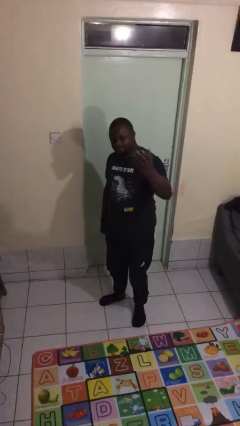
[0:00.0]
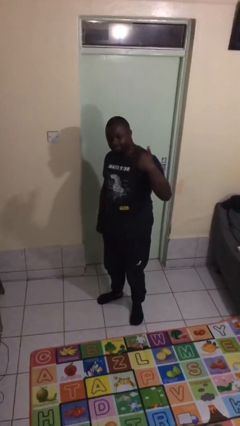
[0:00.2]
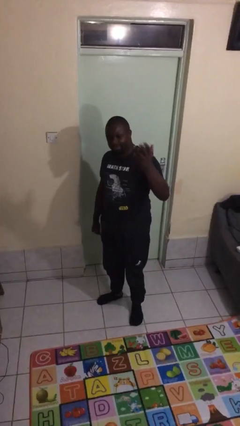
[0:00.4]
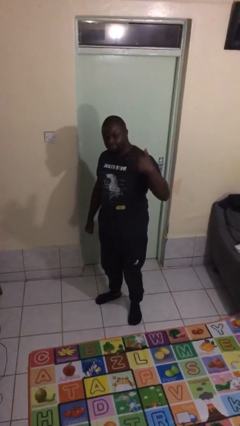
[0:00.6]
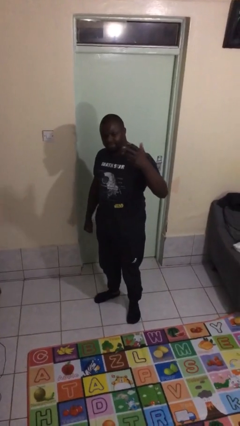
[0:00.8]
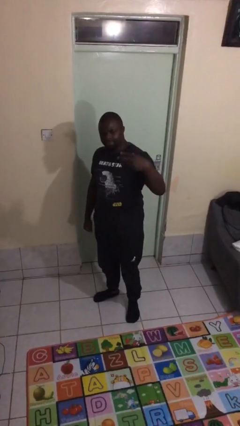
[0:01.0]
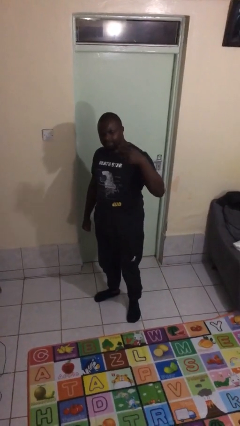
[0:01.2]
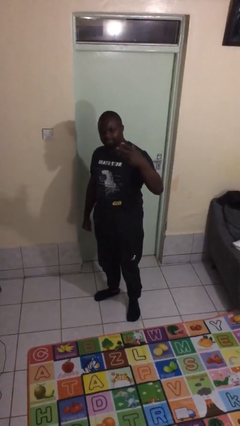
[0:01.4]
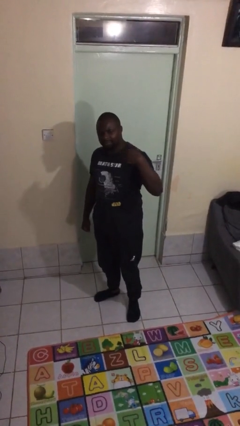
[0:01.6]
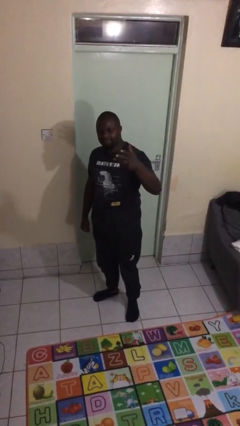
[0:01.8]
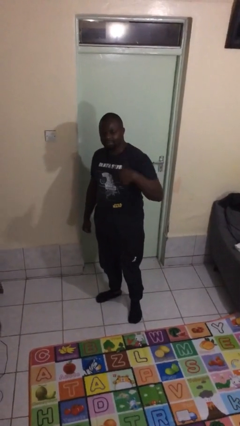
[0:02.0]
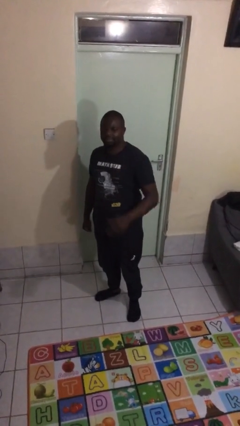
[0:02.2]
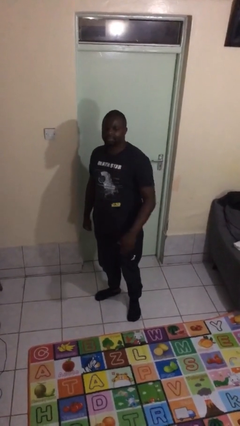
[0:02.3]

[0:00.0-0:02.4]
person gestures come here

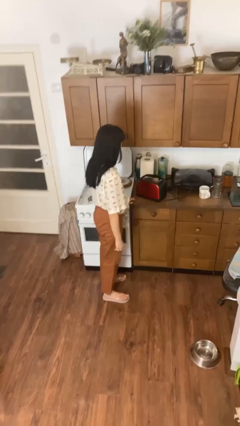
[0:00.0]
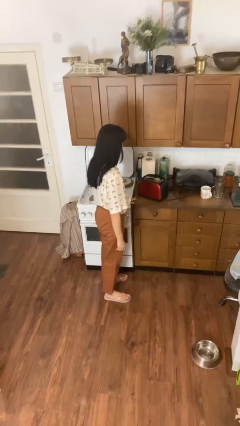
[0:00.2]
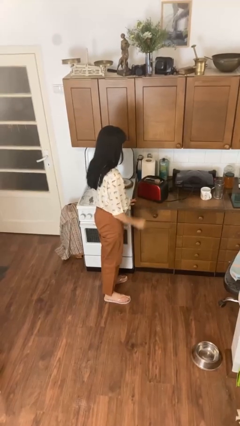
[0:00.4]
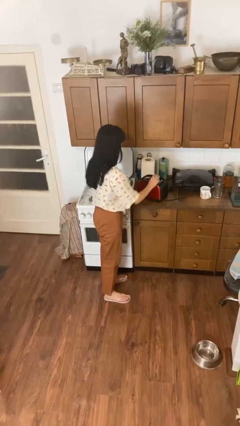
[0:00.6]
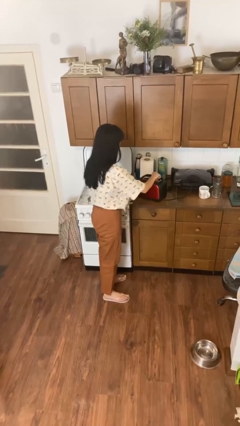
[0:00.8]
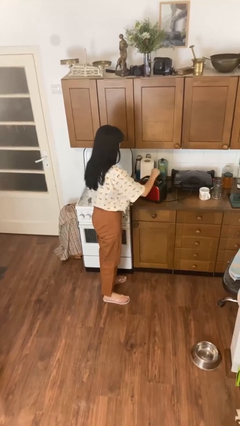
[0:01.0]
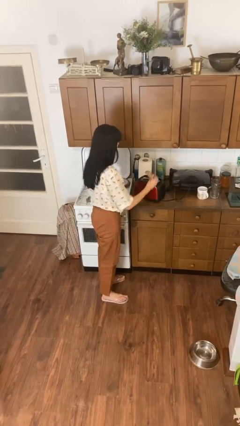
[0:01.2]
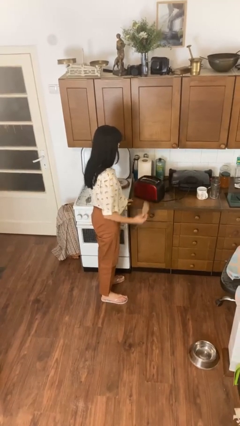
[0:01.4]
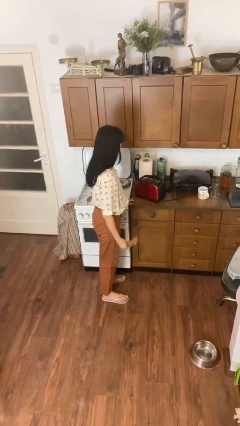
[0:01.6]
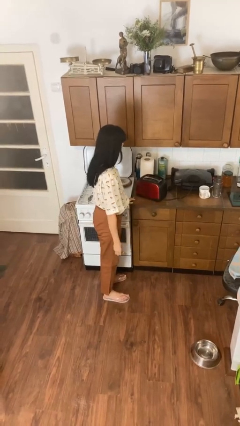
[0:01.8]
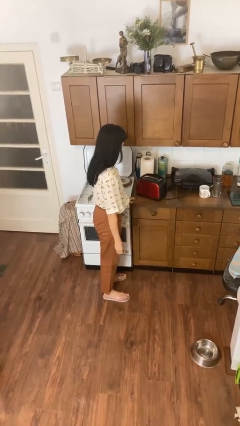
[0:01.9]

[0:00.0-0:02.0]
person takes object from toaster

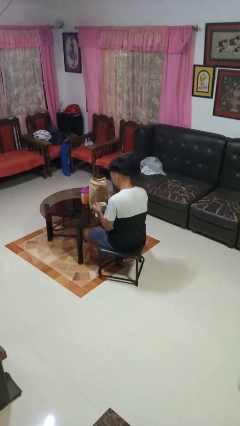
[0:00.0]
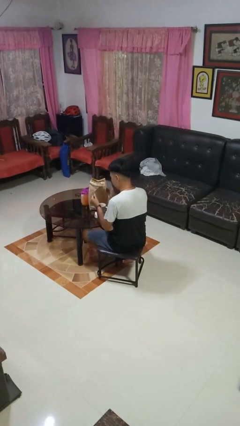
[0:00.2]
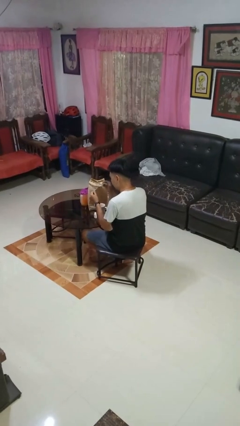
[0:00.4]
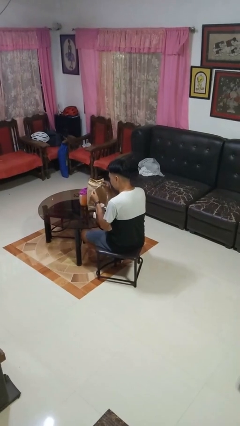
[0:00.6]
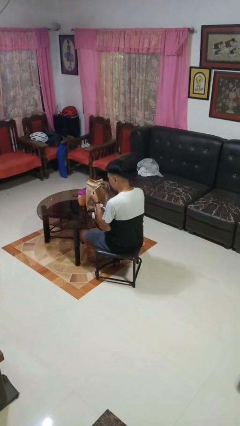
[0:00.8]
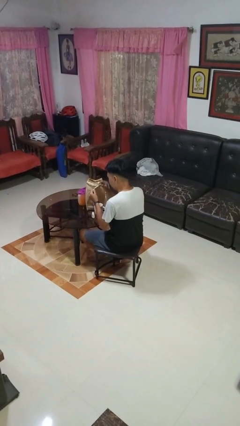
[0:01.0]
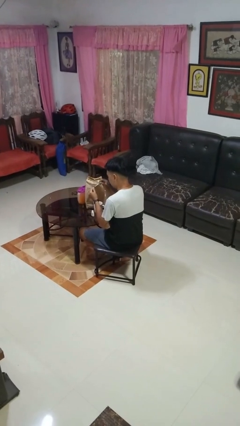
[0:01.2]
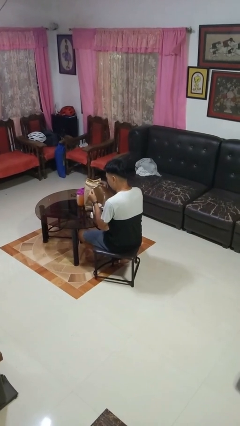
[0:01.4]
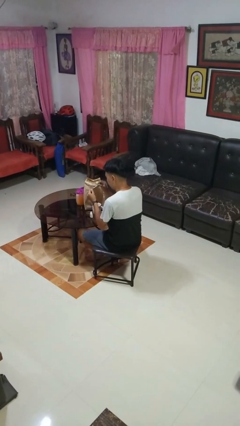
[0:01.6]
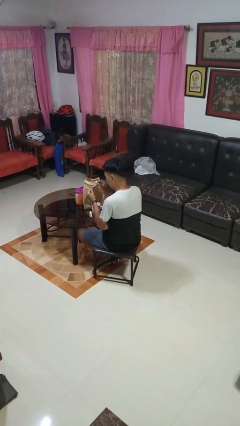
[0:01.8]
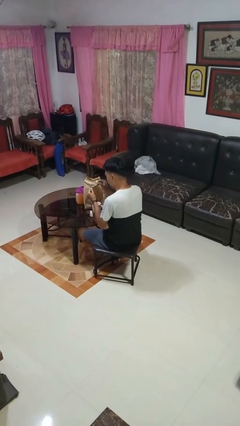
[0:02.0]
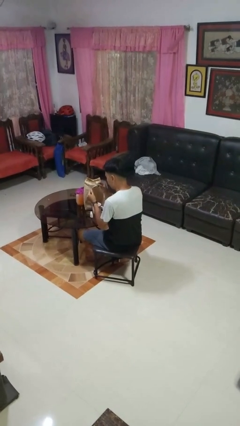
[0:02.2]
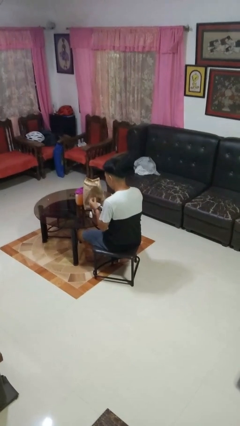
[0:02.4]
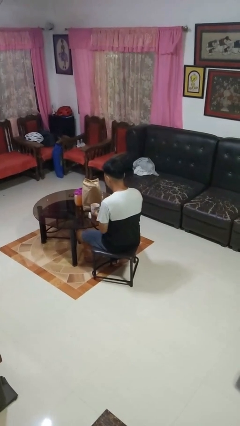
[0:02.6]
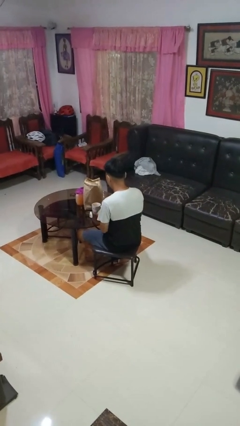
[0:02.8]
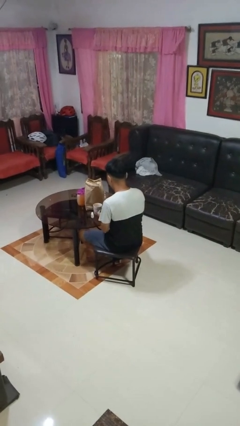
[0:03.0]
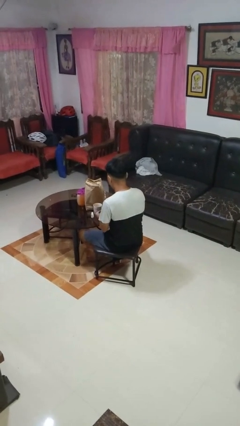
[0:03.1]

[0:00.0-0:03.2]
person paints fingernails

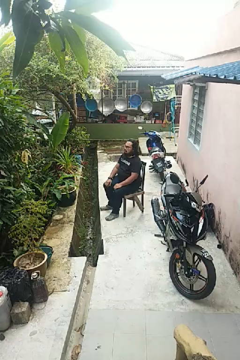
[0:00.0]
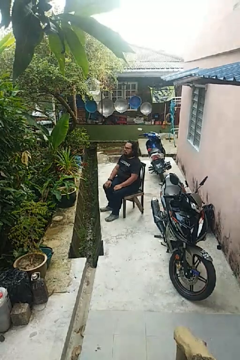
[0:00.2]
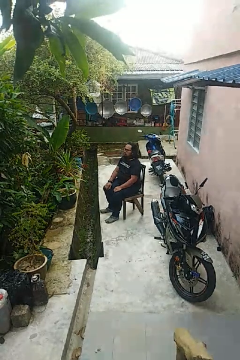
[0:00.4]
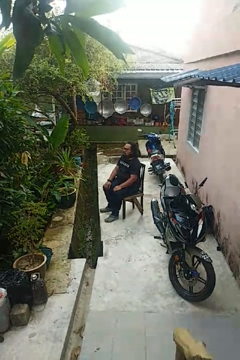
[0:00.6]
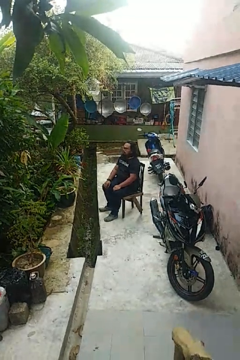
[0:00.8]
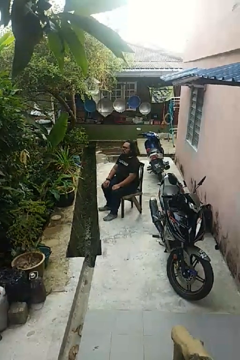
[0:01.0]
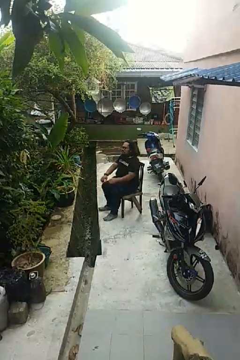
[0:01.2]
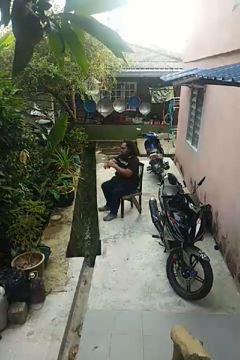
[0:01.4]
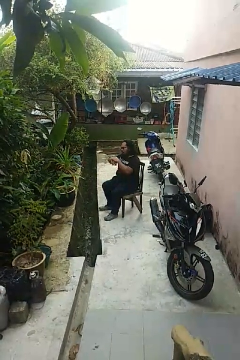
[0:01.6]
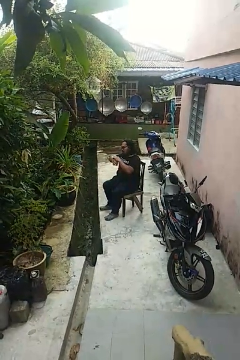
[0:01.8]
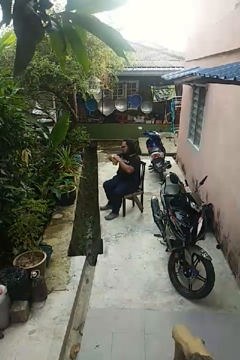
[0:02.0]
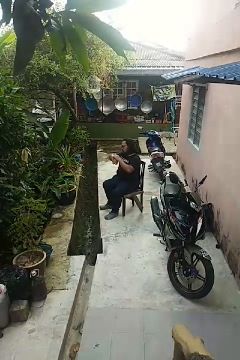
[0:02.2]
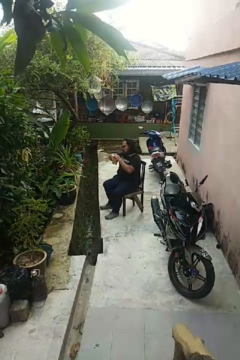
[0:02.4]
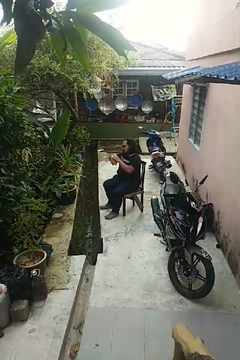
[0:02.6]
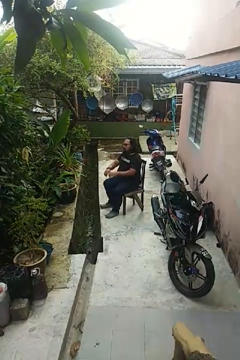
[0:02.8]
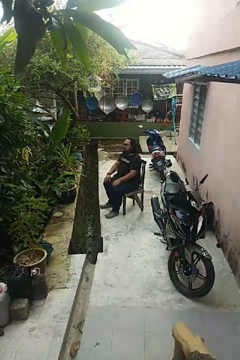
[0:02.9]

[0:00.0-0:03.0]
person looks at wristwatch

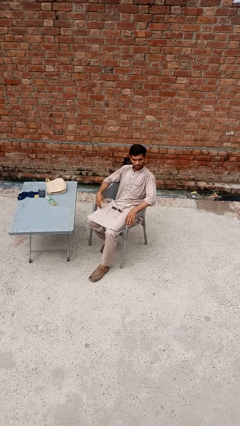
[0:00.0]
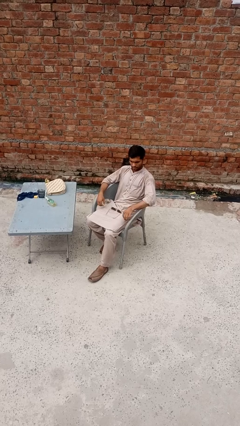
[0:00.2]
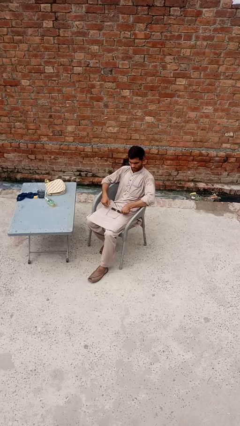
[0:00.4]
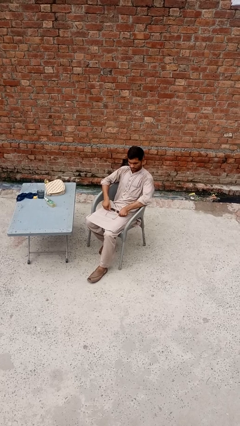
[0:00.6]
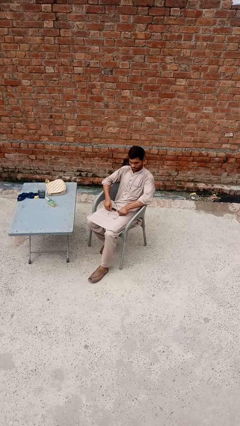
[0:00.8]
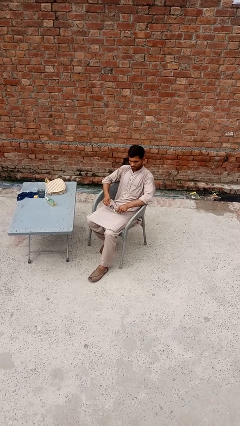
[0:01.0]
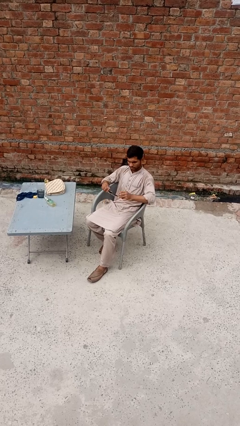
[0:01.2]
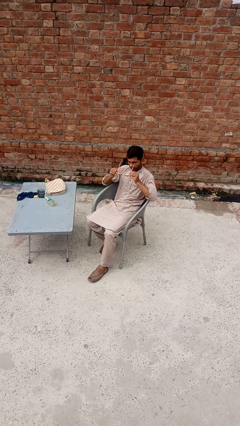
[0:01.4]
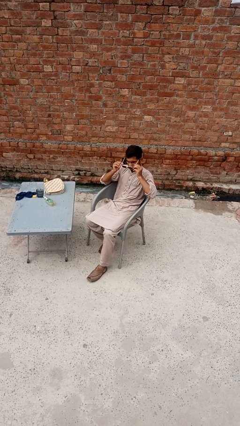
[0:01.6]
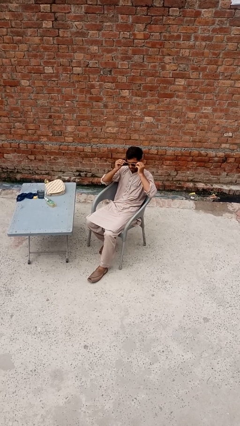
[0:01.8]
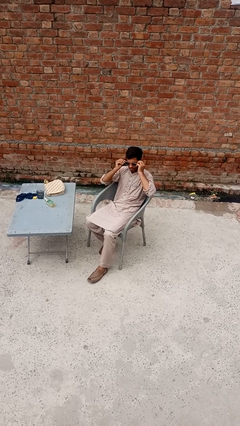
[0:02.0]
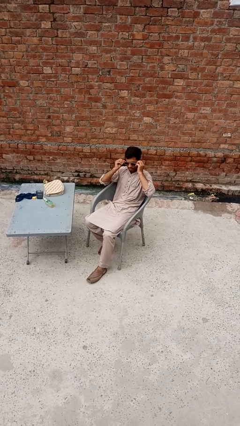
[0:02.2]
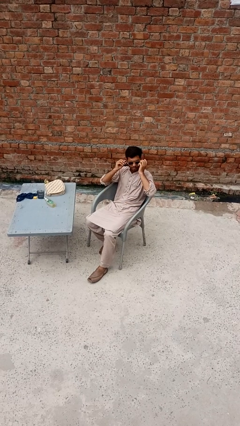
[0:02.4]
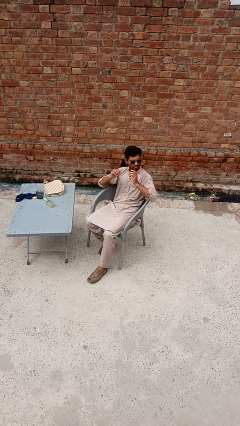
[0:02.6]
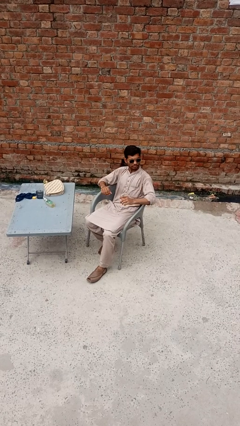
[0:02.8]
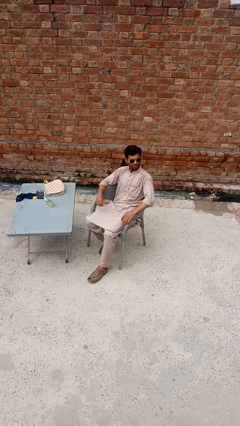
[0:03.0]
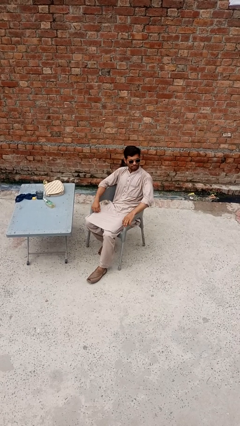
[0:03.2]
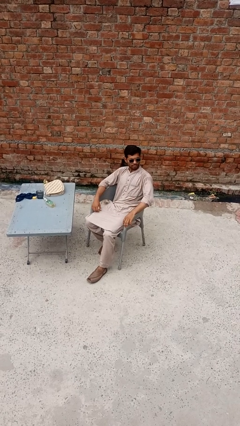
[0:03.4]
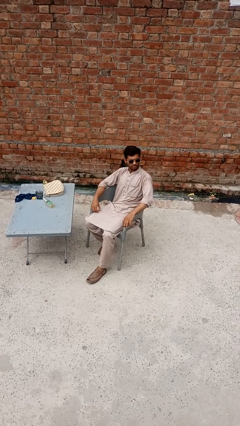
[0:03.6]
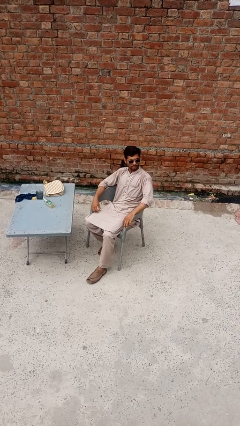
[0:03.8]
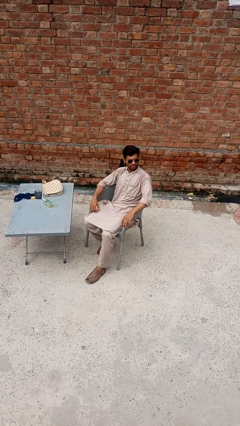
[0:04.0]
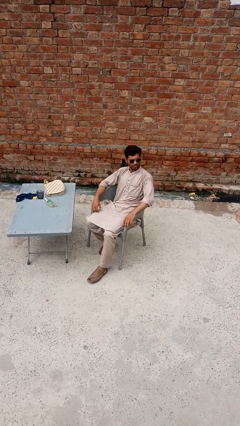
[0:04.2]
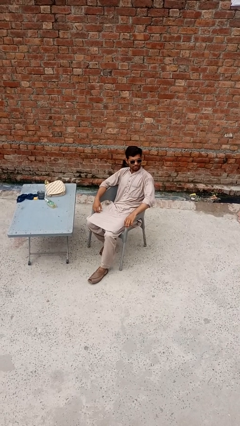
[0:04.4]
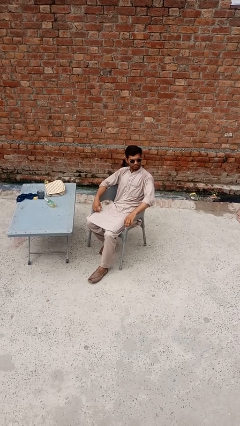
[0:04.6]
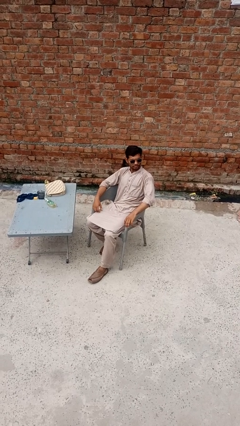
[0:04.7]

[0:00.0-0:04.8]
person puts on sunglasses

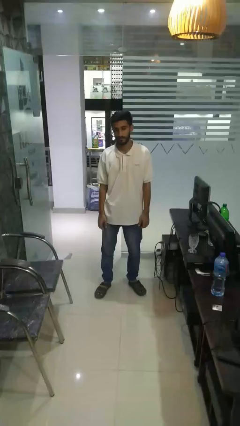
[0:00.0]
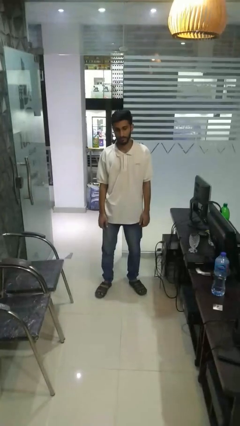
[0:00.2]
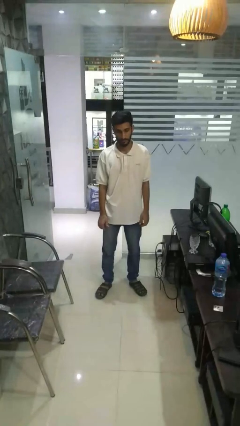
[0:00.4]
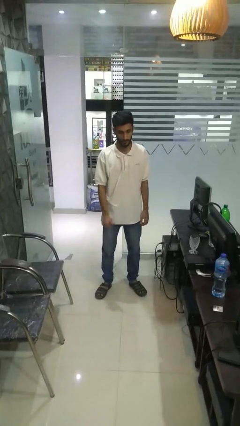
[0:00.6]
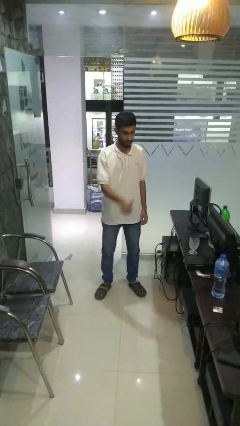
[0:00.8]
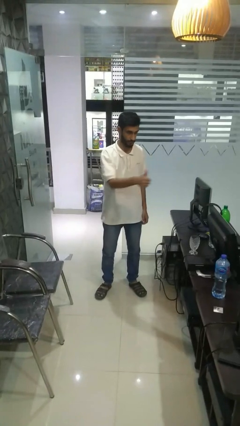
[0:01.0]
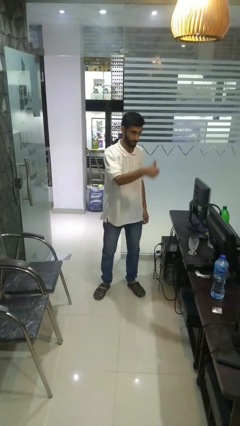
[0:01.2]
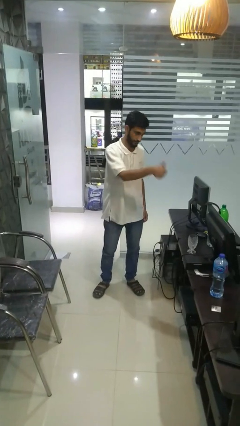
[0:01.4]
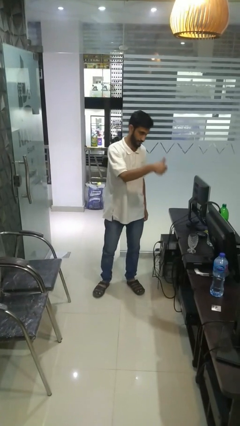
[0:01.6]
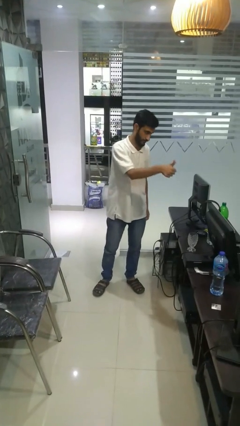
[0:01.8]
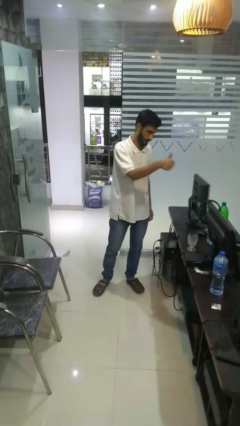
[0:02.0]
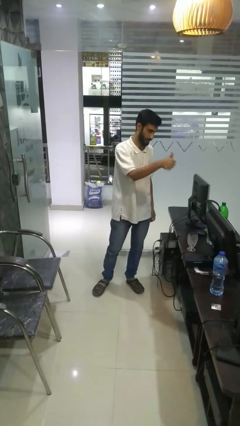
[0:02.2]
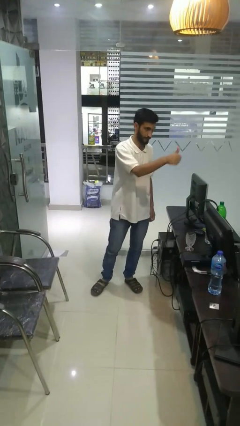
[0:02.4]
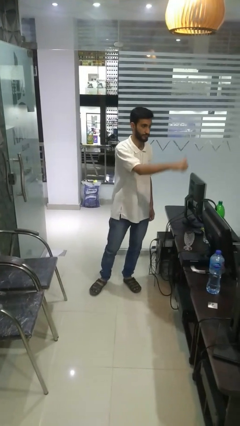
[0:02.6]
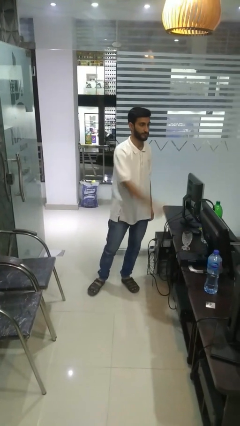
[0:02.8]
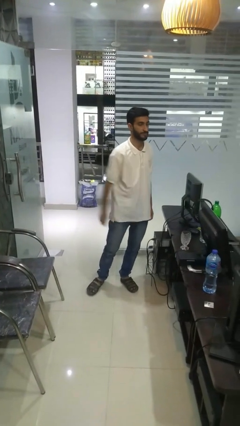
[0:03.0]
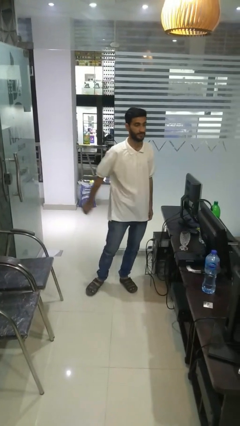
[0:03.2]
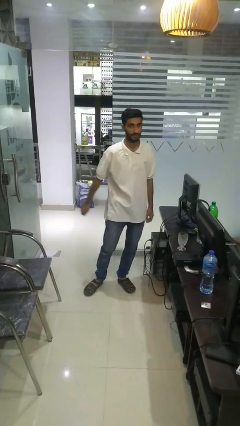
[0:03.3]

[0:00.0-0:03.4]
person gestures thumbs up
